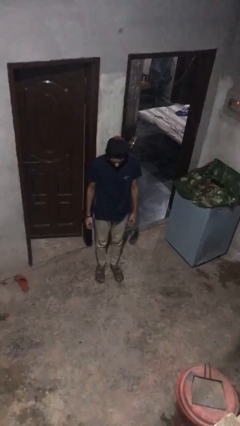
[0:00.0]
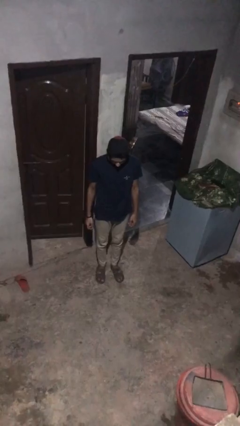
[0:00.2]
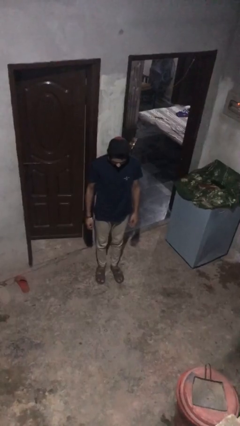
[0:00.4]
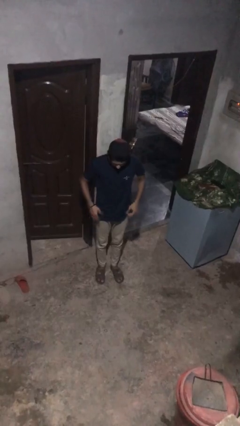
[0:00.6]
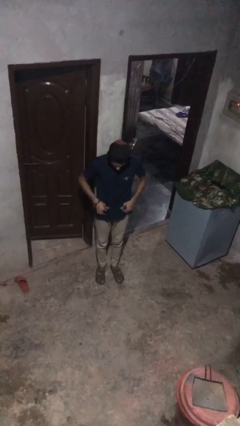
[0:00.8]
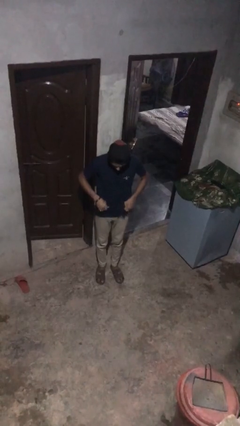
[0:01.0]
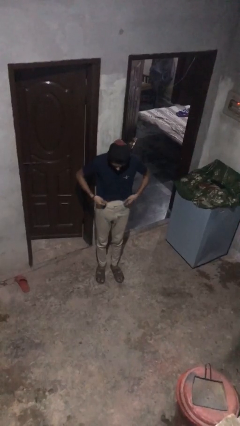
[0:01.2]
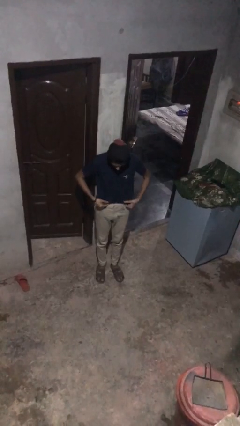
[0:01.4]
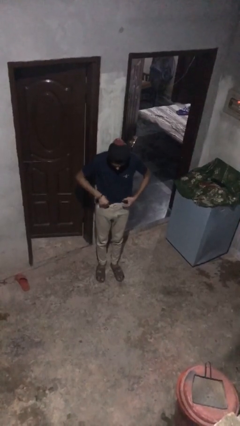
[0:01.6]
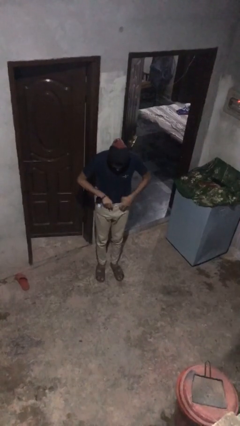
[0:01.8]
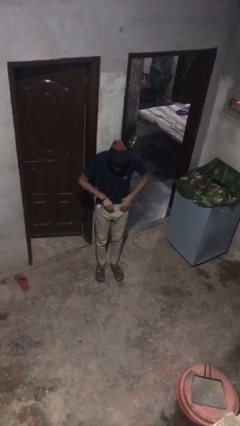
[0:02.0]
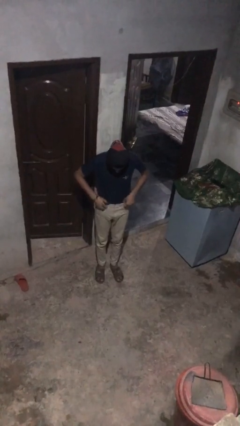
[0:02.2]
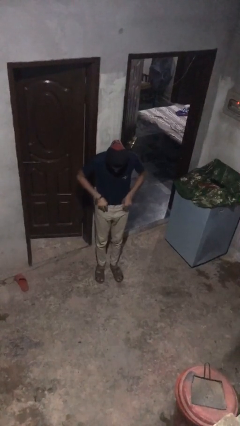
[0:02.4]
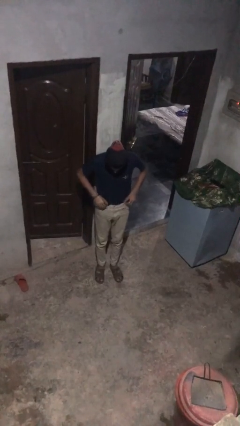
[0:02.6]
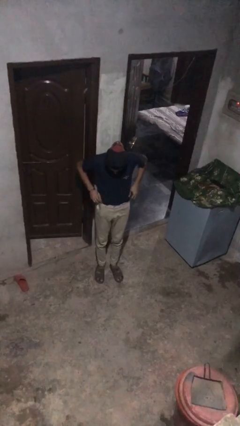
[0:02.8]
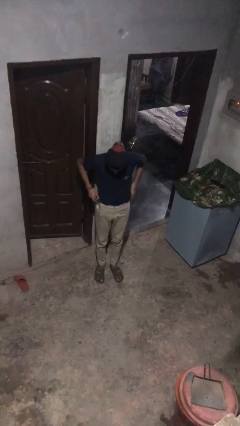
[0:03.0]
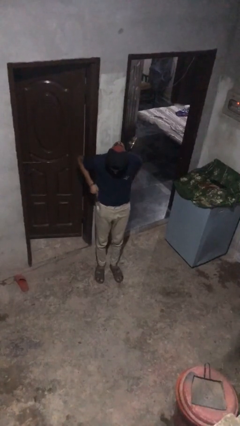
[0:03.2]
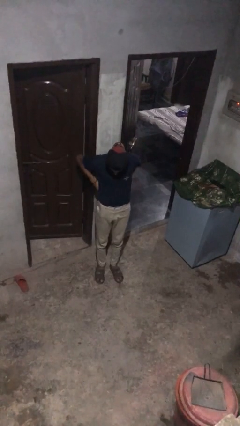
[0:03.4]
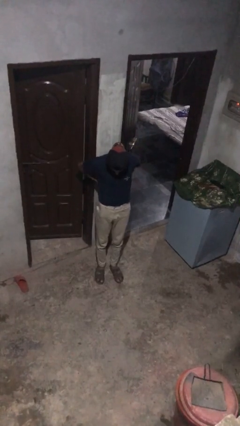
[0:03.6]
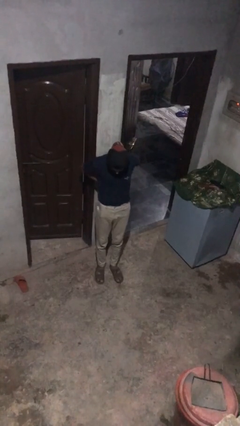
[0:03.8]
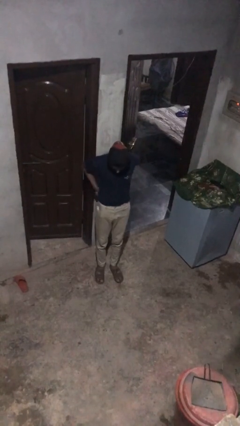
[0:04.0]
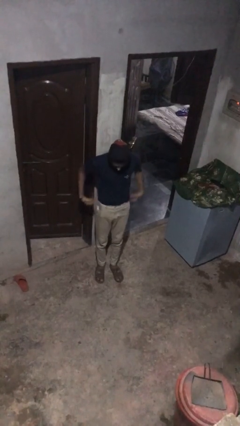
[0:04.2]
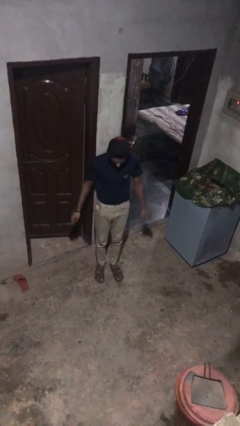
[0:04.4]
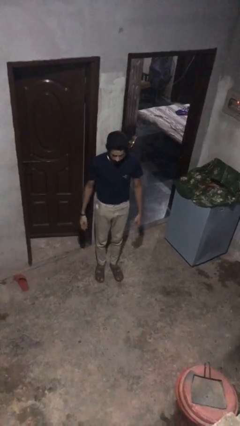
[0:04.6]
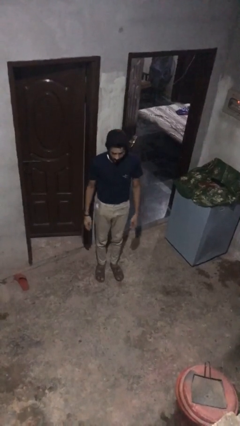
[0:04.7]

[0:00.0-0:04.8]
person tucks in shirt

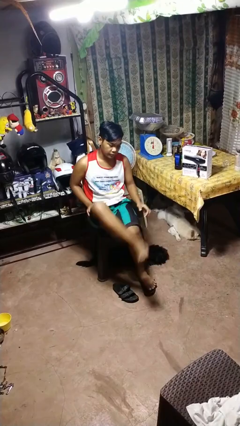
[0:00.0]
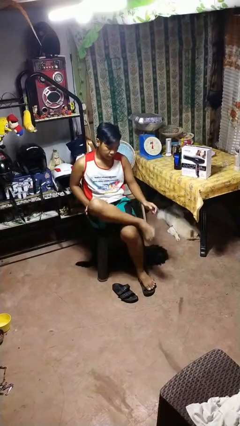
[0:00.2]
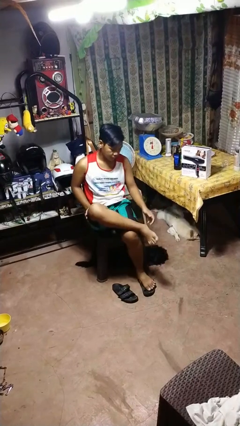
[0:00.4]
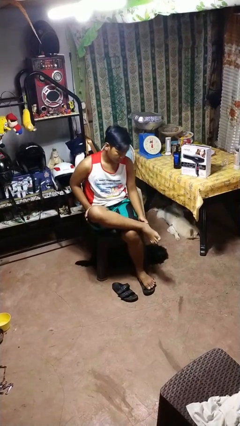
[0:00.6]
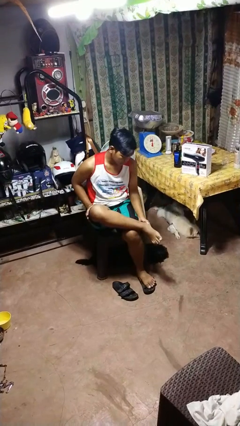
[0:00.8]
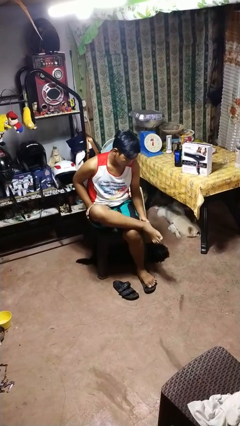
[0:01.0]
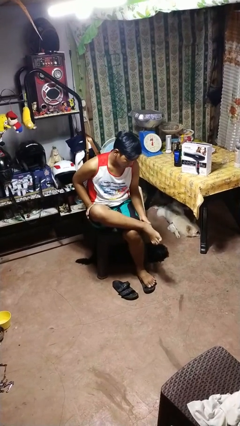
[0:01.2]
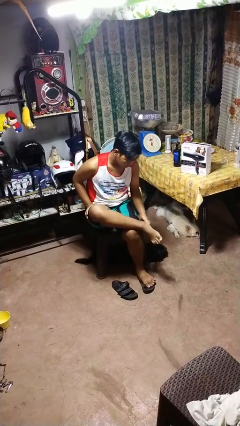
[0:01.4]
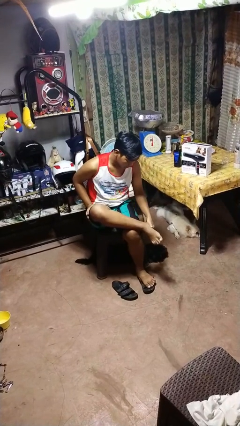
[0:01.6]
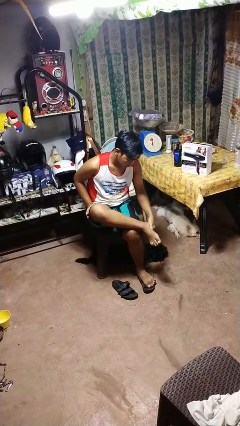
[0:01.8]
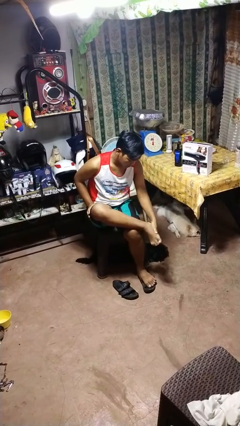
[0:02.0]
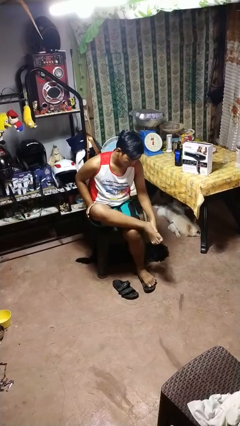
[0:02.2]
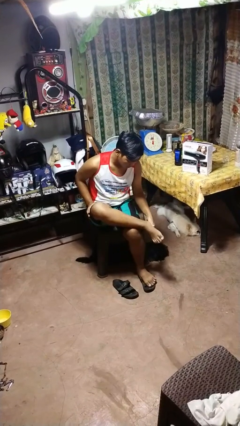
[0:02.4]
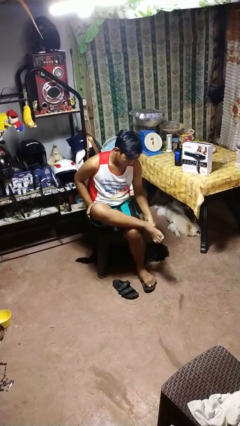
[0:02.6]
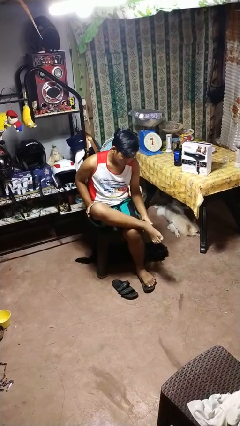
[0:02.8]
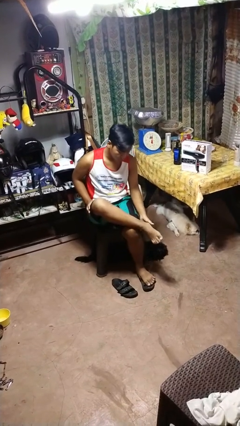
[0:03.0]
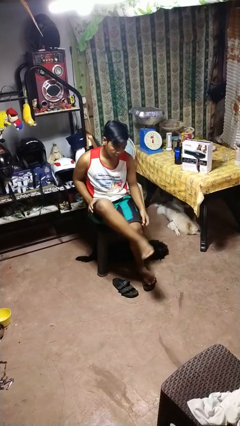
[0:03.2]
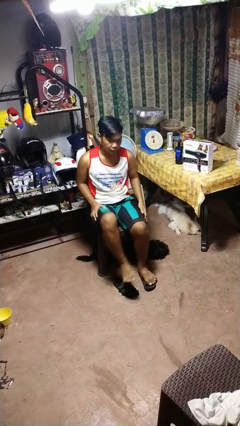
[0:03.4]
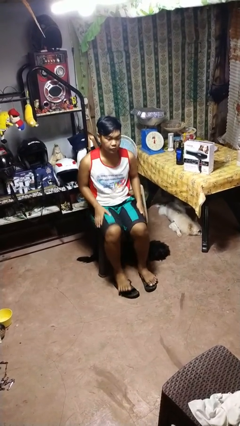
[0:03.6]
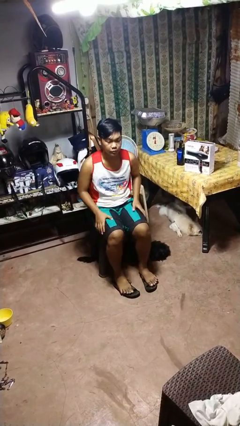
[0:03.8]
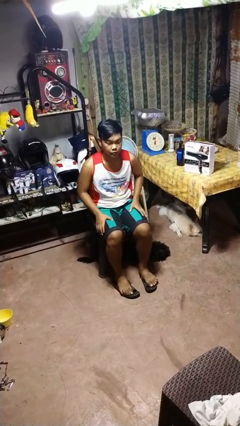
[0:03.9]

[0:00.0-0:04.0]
person rubs foot

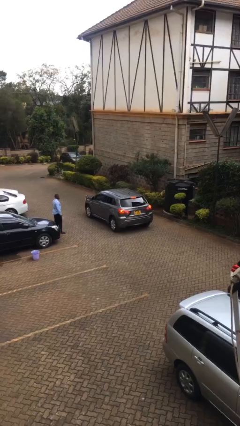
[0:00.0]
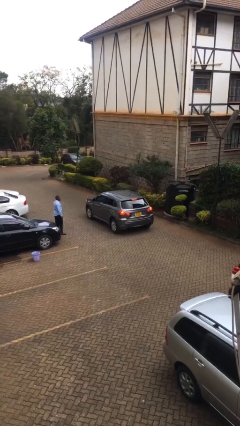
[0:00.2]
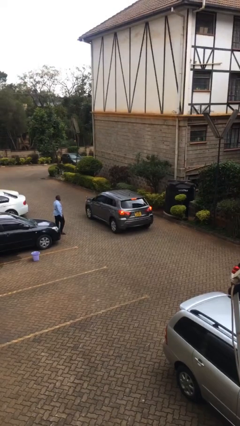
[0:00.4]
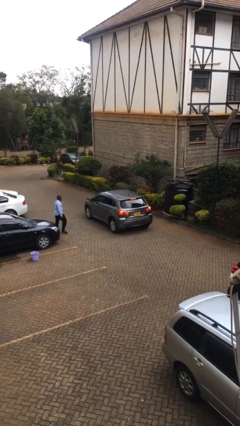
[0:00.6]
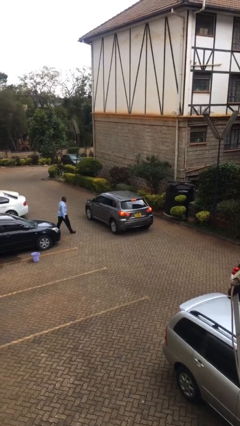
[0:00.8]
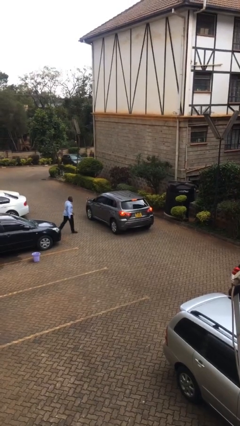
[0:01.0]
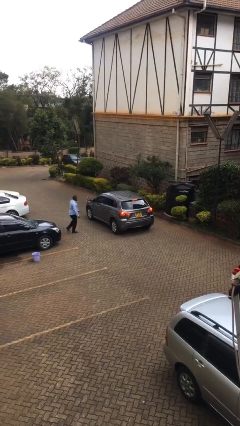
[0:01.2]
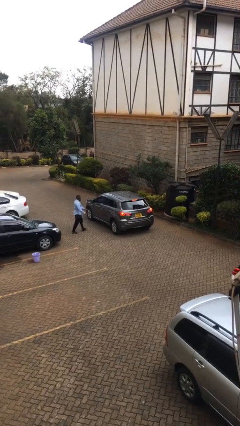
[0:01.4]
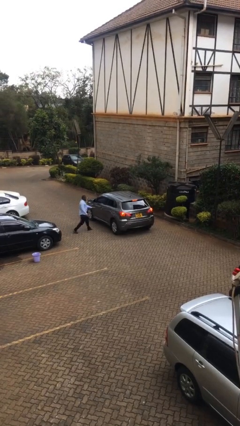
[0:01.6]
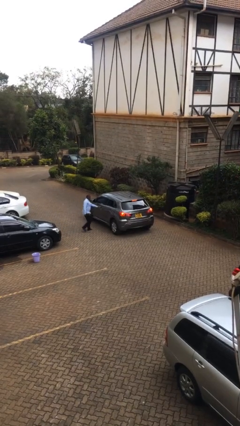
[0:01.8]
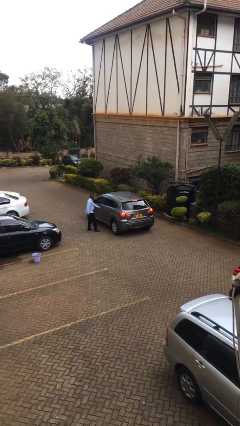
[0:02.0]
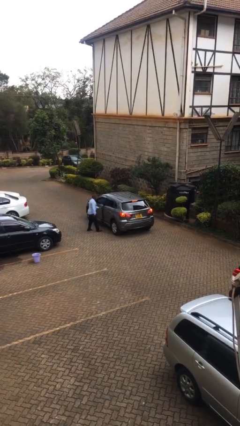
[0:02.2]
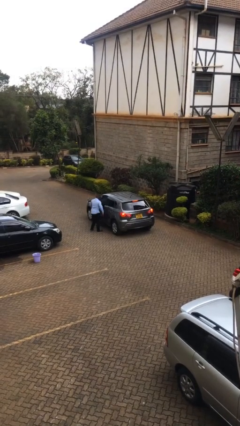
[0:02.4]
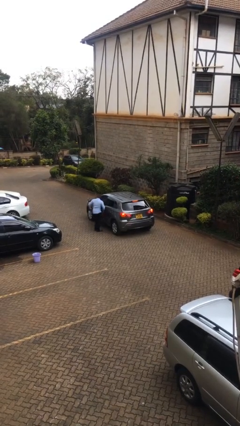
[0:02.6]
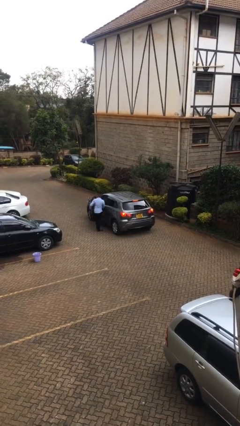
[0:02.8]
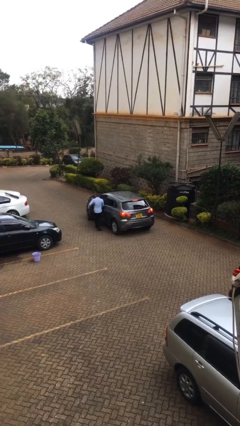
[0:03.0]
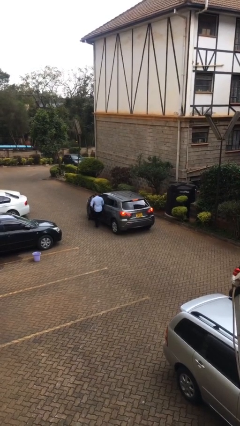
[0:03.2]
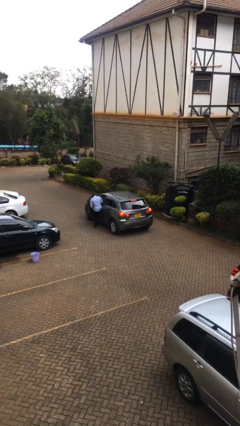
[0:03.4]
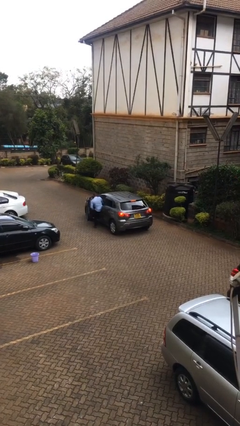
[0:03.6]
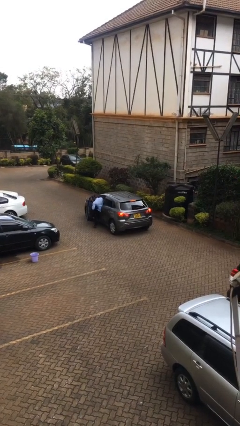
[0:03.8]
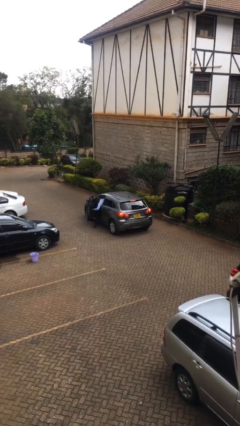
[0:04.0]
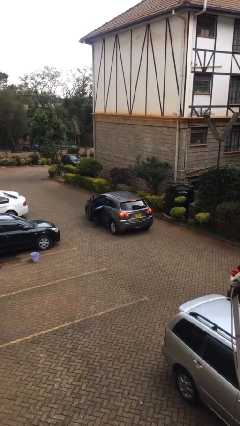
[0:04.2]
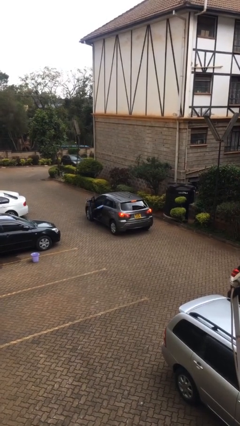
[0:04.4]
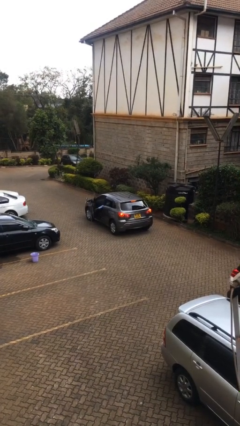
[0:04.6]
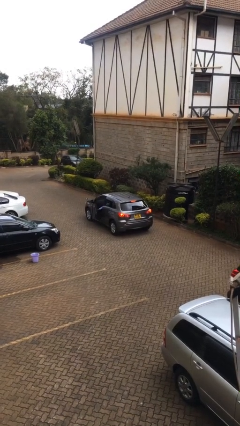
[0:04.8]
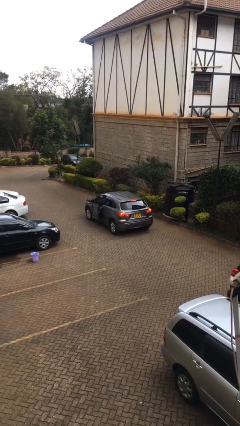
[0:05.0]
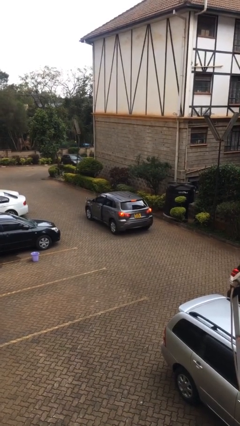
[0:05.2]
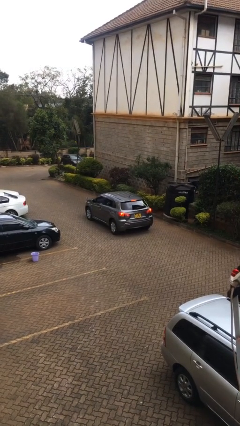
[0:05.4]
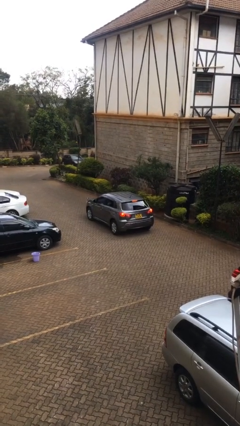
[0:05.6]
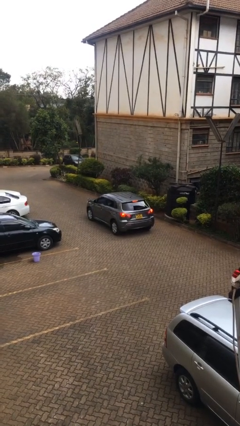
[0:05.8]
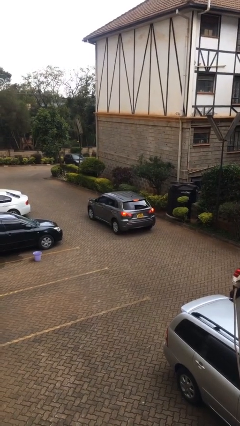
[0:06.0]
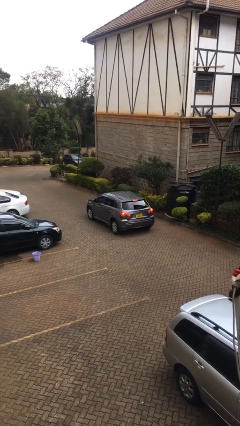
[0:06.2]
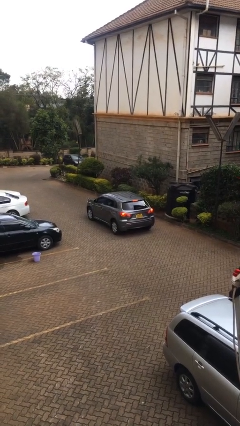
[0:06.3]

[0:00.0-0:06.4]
car picks up person

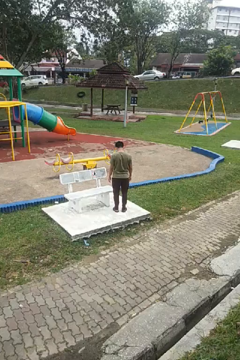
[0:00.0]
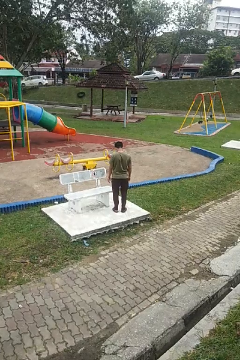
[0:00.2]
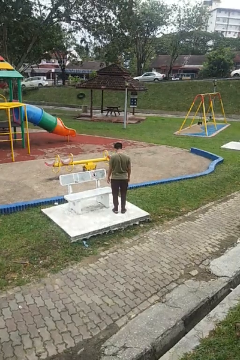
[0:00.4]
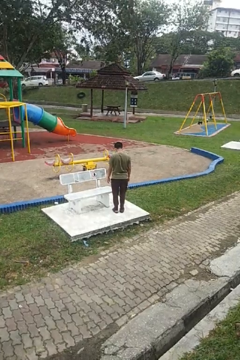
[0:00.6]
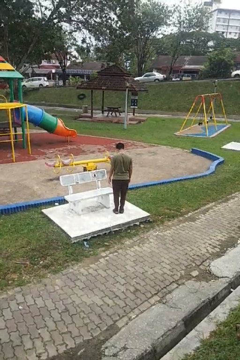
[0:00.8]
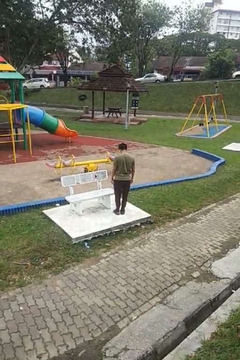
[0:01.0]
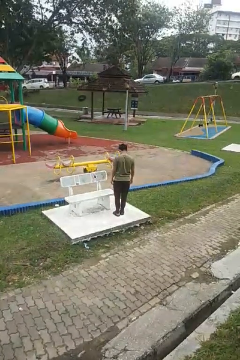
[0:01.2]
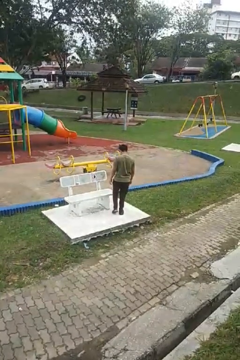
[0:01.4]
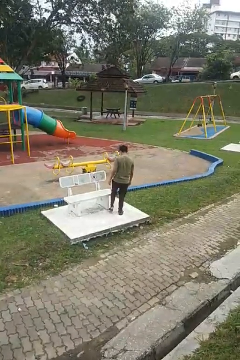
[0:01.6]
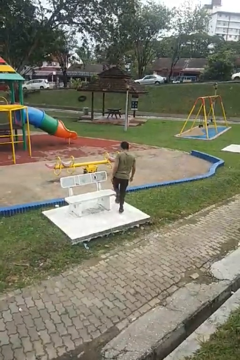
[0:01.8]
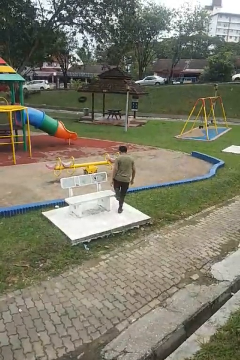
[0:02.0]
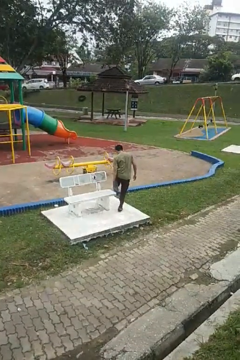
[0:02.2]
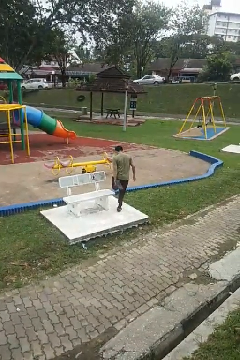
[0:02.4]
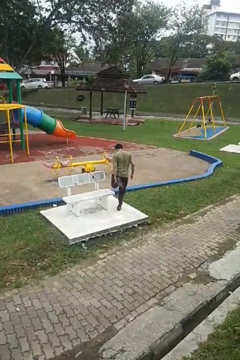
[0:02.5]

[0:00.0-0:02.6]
person stubs toe

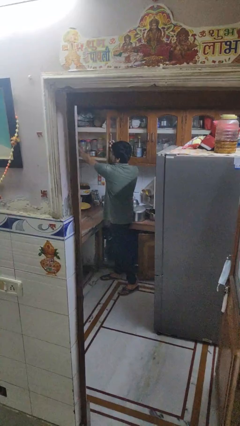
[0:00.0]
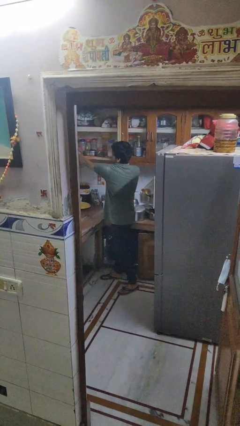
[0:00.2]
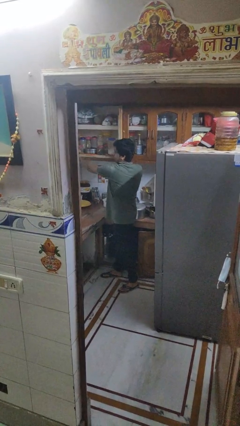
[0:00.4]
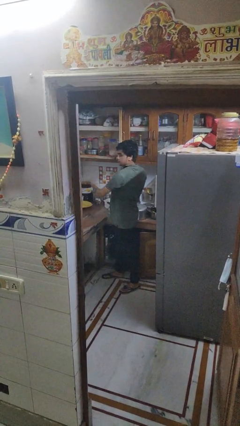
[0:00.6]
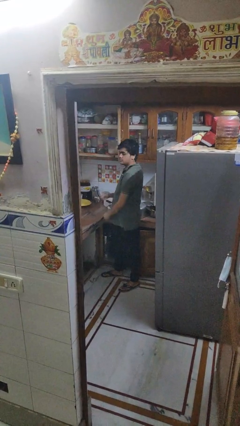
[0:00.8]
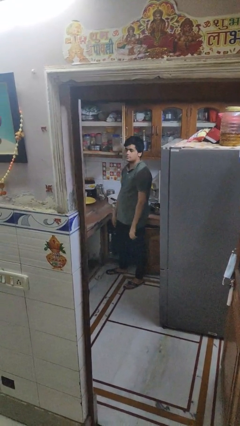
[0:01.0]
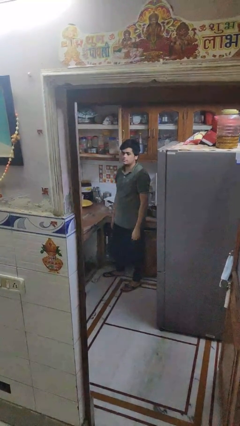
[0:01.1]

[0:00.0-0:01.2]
person opens cabinet
